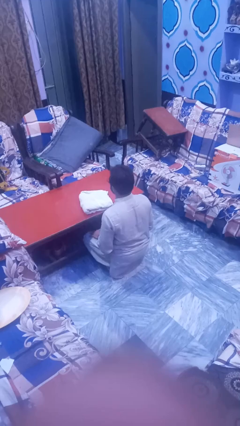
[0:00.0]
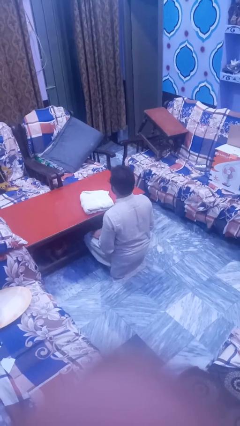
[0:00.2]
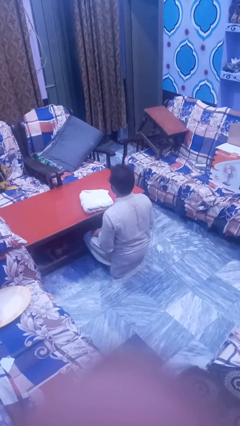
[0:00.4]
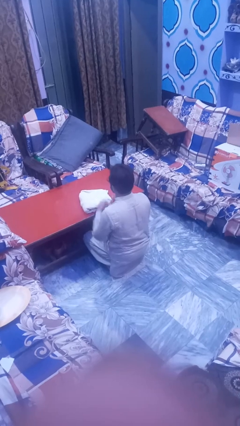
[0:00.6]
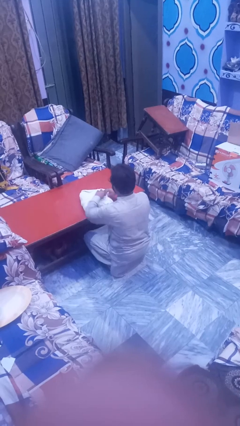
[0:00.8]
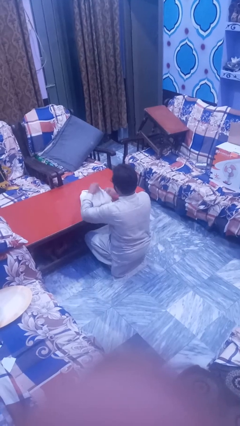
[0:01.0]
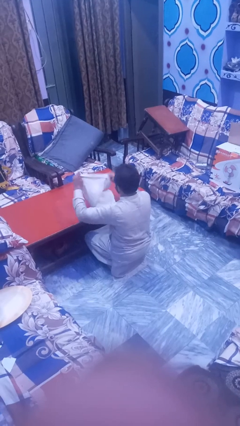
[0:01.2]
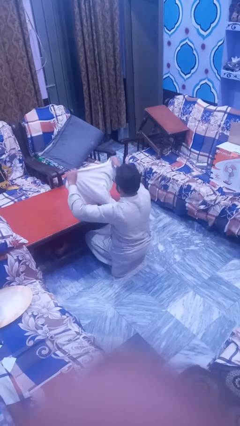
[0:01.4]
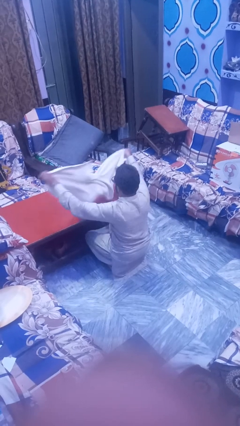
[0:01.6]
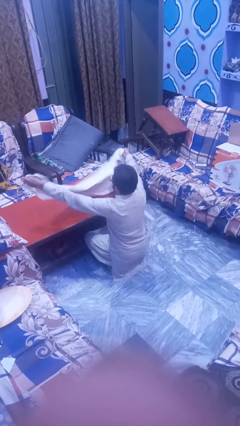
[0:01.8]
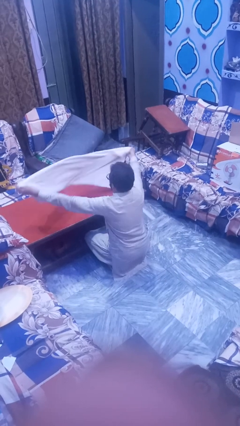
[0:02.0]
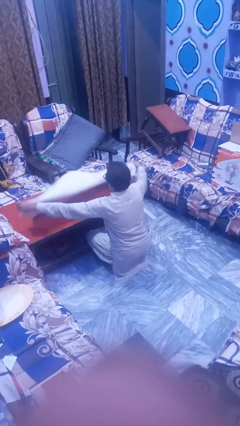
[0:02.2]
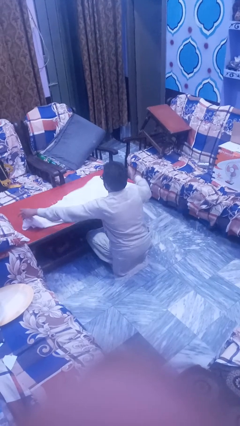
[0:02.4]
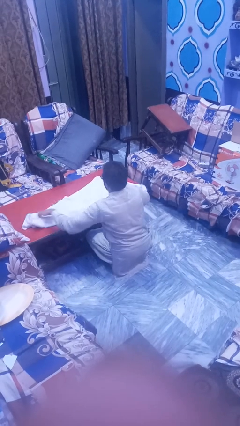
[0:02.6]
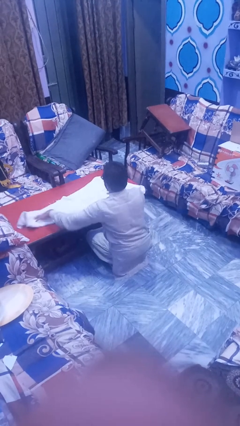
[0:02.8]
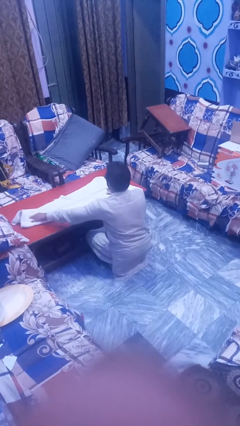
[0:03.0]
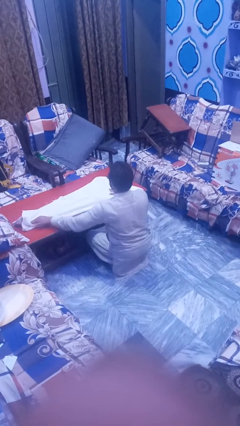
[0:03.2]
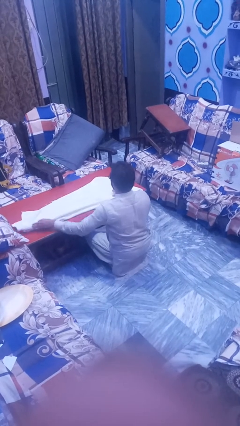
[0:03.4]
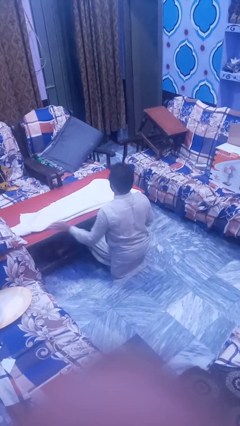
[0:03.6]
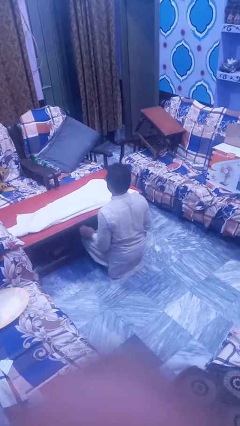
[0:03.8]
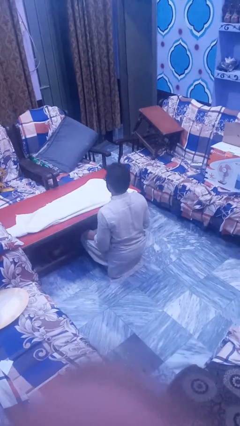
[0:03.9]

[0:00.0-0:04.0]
person spreads tablecloth

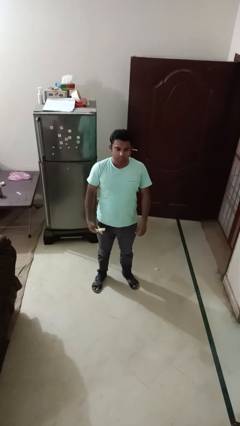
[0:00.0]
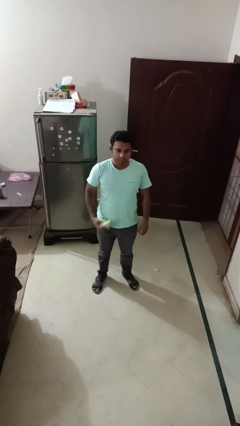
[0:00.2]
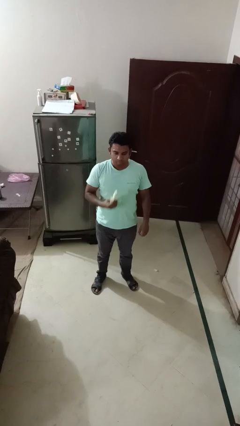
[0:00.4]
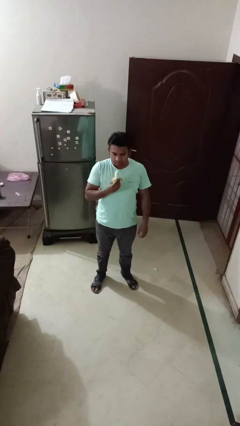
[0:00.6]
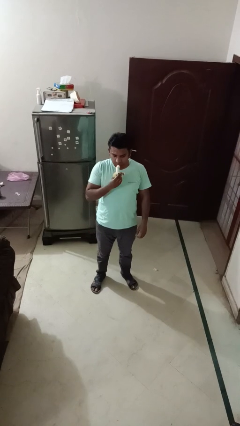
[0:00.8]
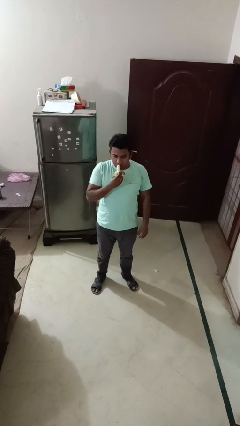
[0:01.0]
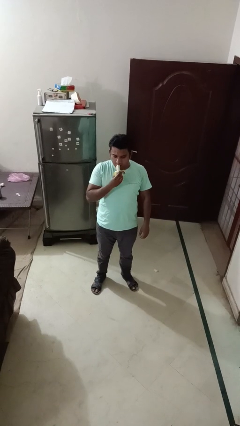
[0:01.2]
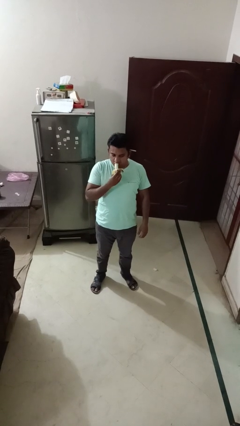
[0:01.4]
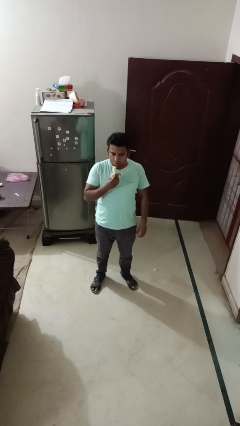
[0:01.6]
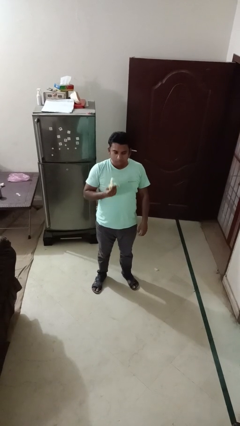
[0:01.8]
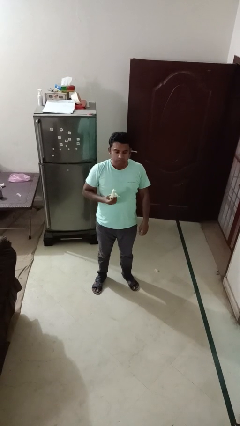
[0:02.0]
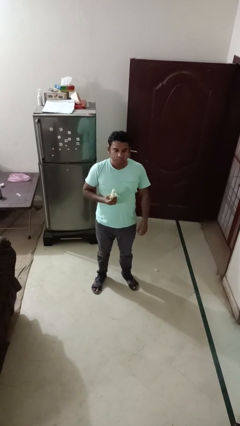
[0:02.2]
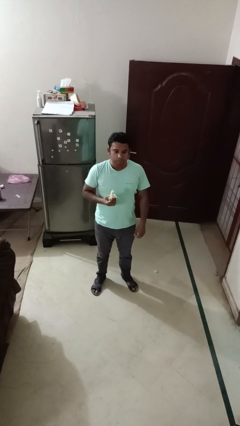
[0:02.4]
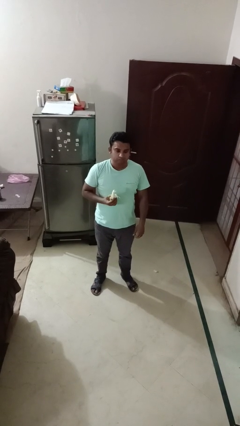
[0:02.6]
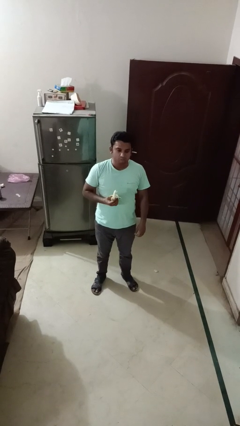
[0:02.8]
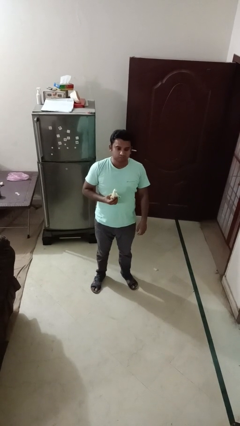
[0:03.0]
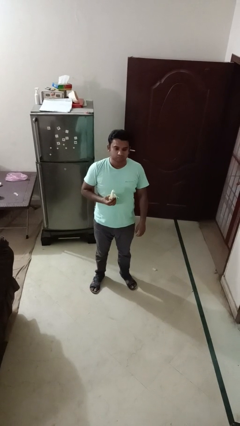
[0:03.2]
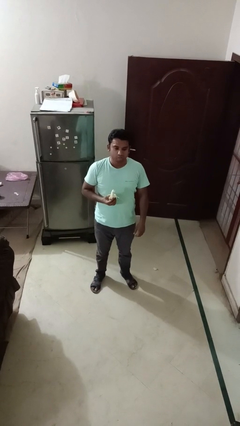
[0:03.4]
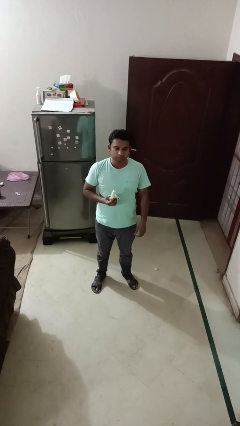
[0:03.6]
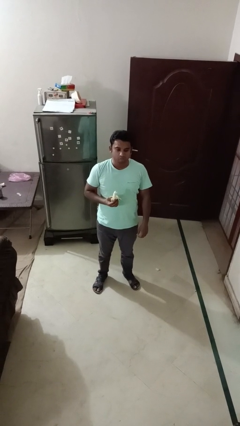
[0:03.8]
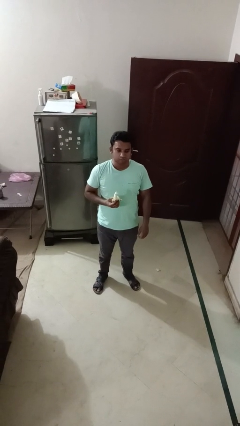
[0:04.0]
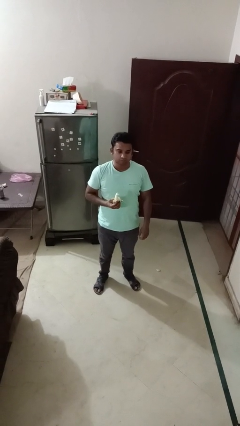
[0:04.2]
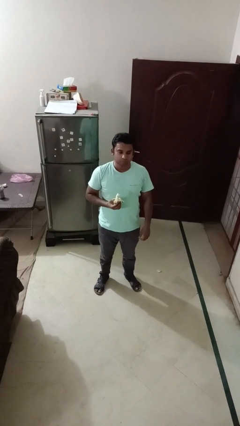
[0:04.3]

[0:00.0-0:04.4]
person eats banana

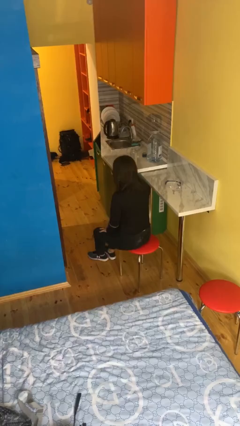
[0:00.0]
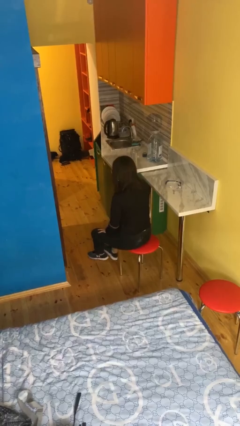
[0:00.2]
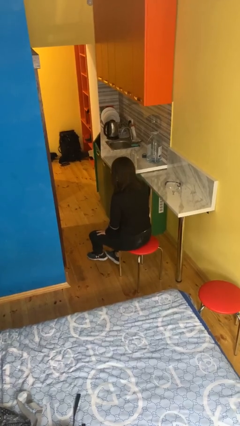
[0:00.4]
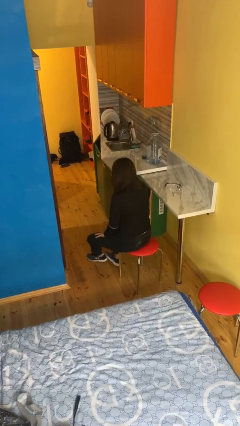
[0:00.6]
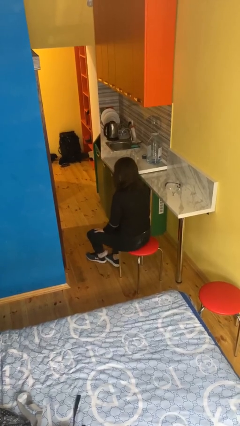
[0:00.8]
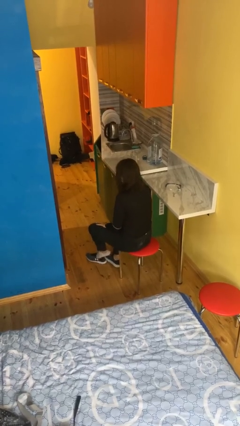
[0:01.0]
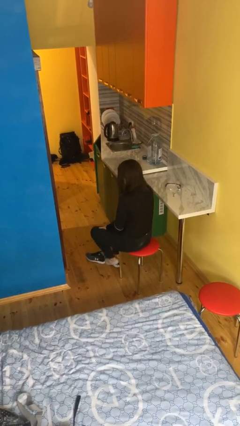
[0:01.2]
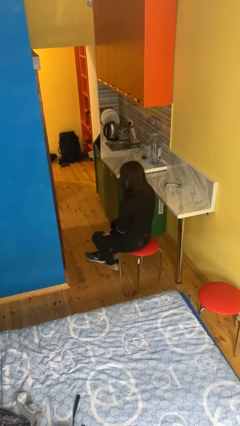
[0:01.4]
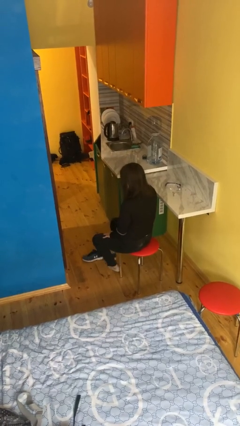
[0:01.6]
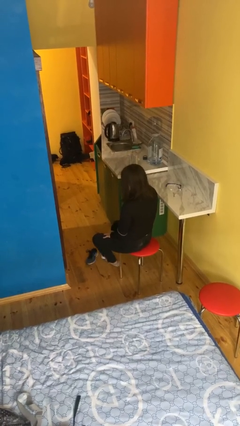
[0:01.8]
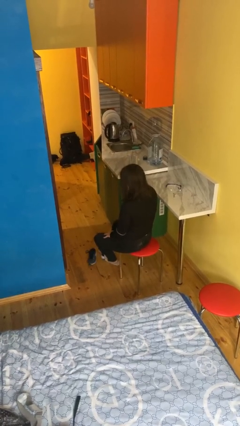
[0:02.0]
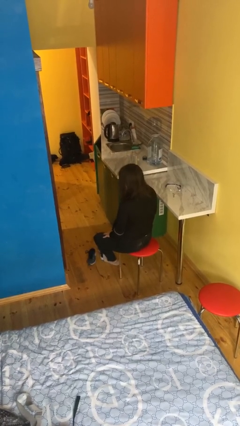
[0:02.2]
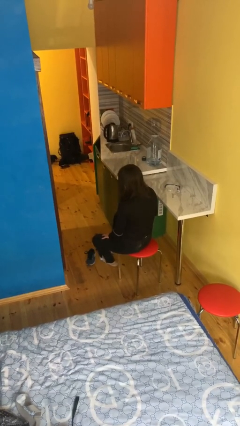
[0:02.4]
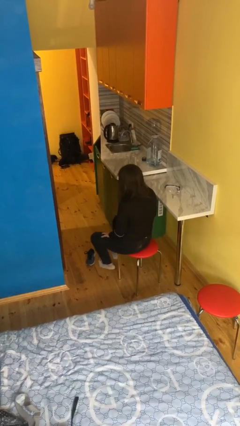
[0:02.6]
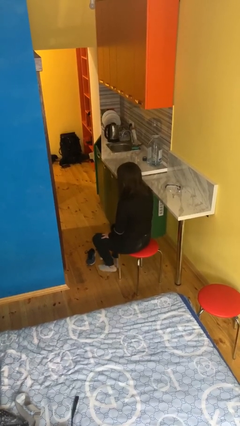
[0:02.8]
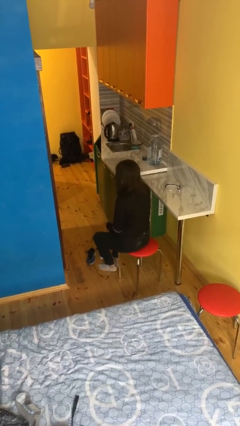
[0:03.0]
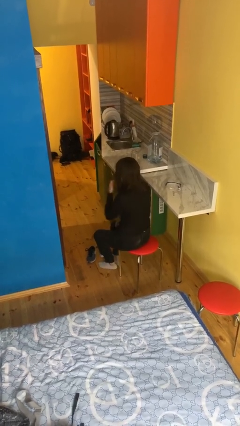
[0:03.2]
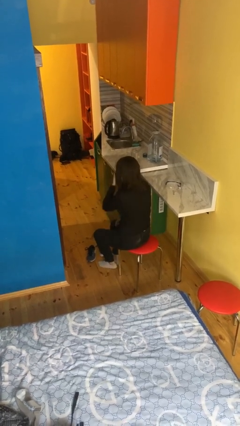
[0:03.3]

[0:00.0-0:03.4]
person takes off shoes

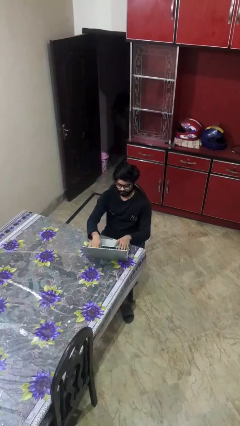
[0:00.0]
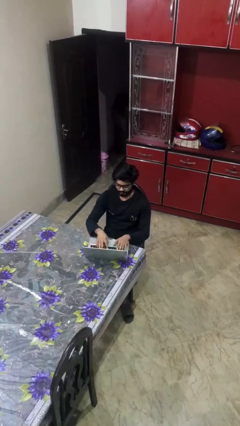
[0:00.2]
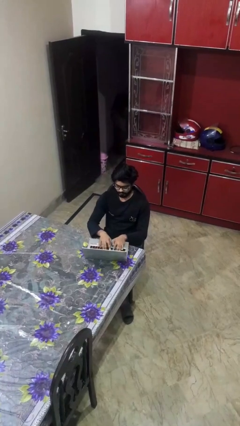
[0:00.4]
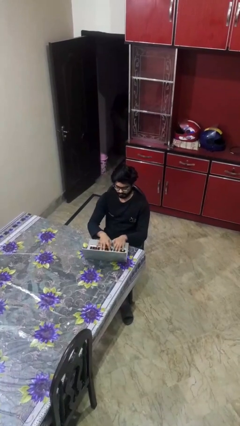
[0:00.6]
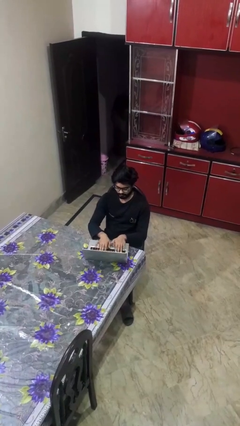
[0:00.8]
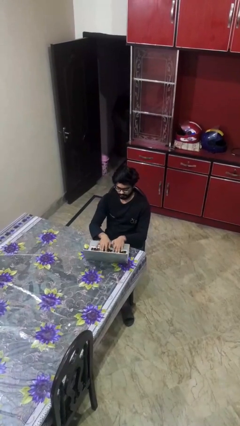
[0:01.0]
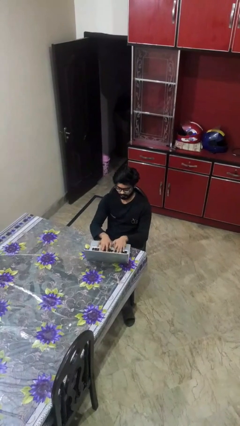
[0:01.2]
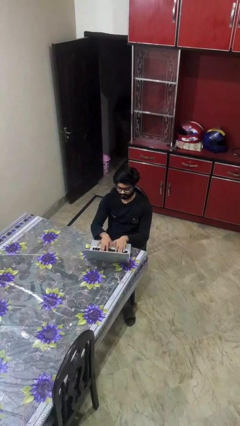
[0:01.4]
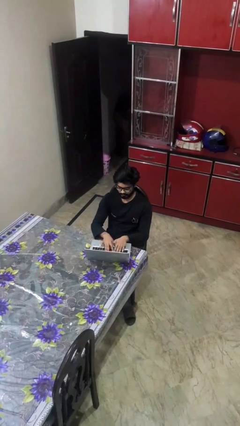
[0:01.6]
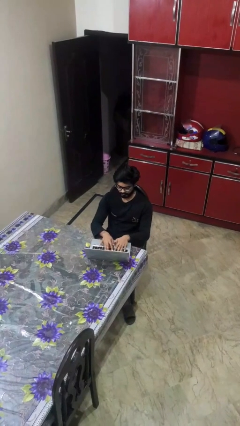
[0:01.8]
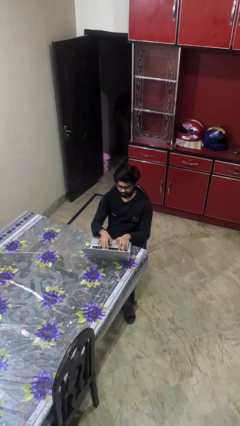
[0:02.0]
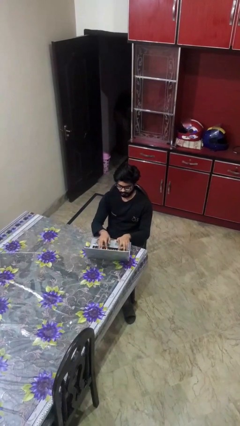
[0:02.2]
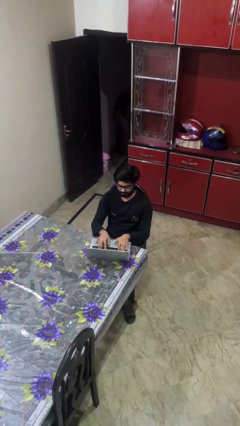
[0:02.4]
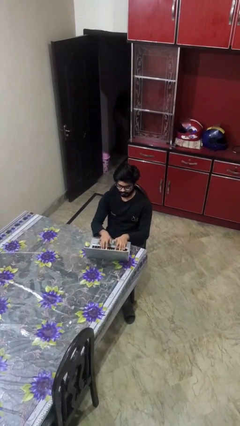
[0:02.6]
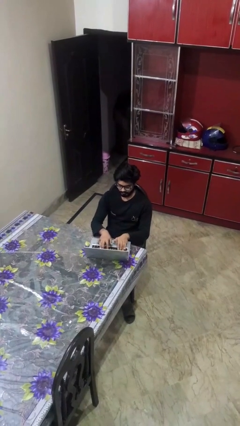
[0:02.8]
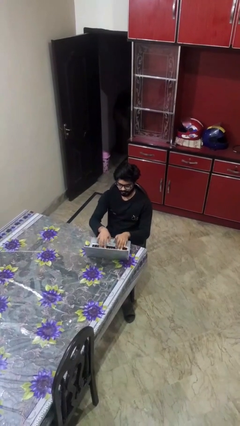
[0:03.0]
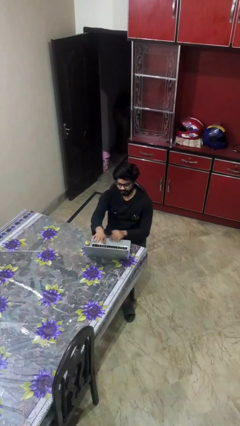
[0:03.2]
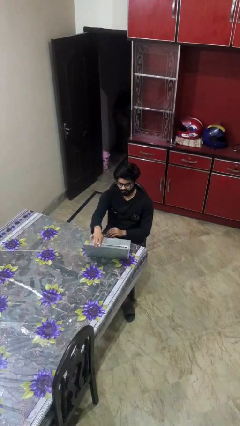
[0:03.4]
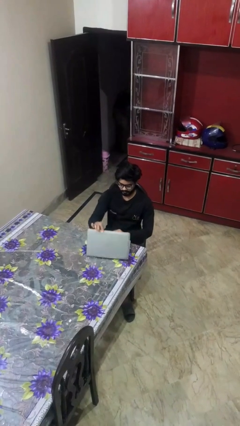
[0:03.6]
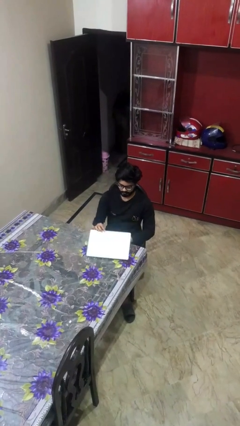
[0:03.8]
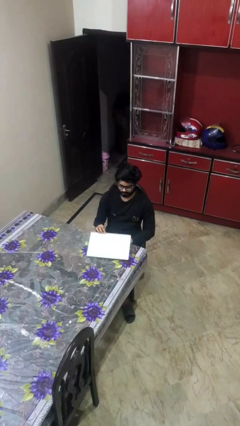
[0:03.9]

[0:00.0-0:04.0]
person interacts with laptop

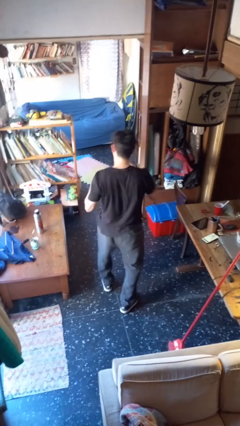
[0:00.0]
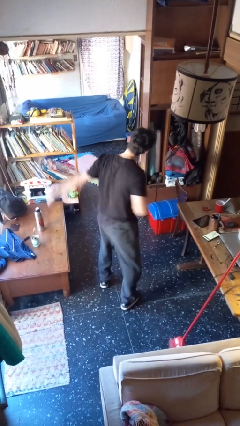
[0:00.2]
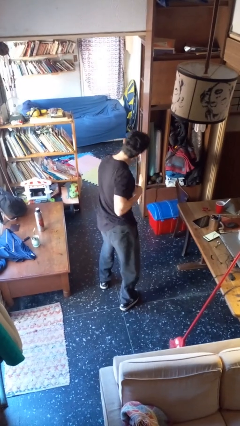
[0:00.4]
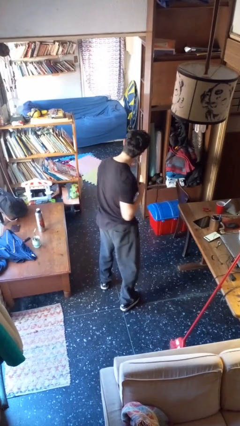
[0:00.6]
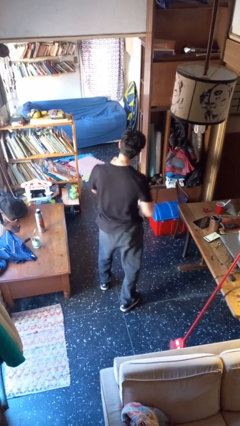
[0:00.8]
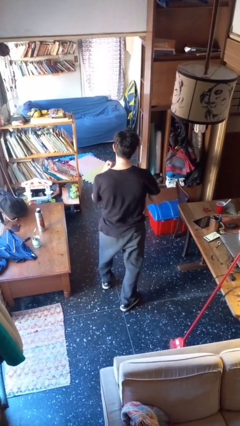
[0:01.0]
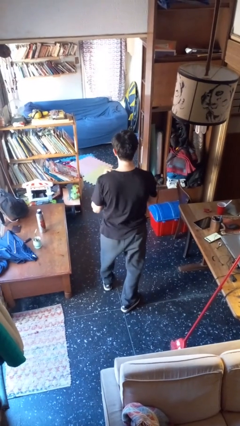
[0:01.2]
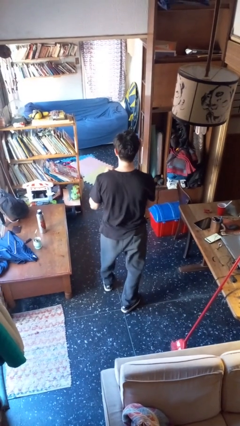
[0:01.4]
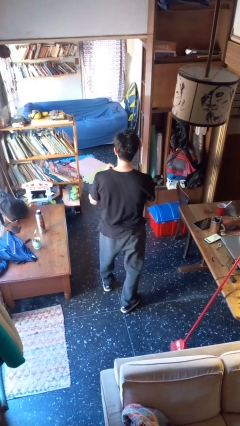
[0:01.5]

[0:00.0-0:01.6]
person punches
